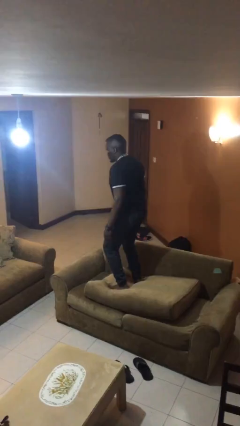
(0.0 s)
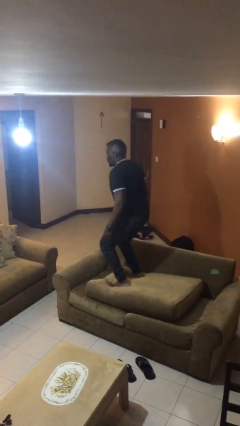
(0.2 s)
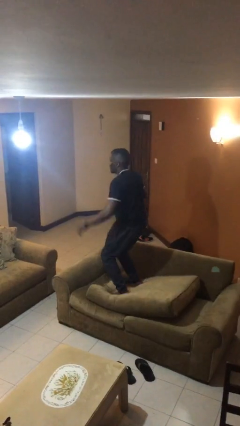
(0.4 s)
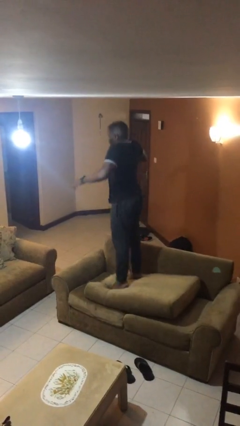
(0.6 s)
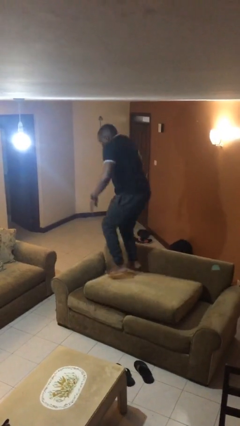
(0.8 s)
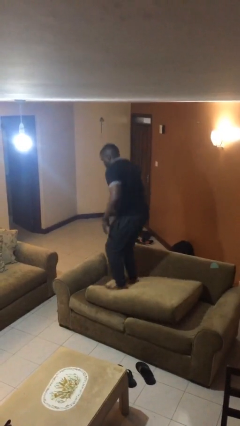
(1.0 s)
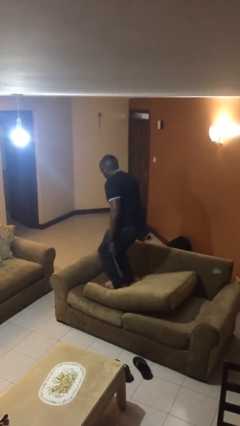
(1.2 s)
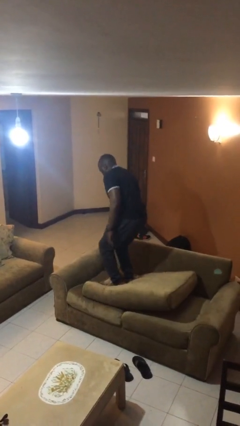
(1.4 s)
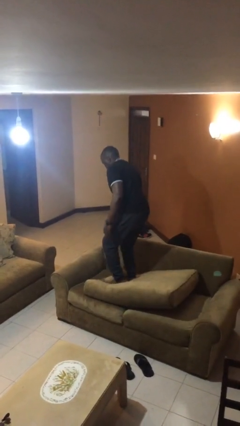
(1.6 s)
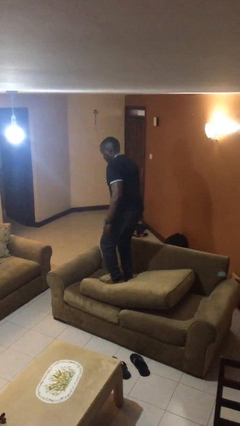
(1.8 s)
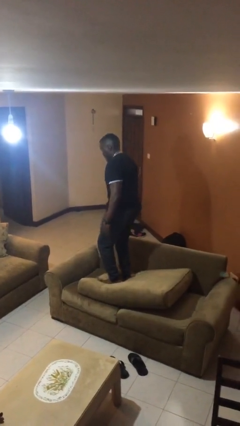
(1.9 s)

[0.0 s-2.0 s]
person jumps on couch

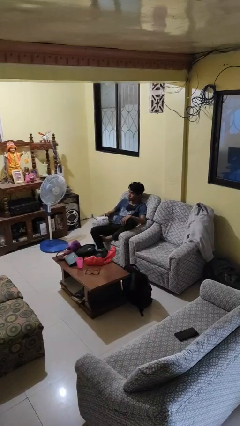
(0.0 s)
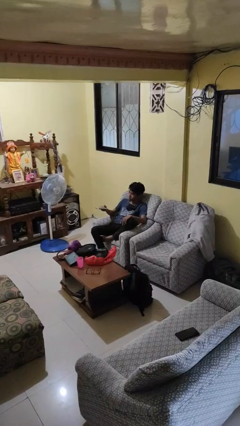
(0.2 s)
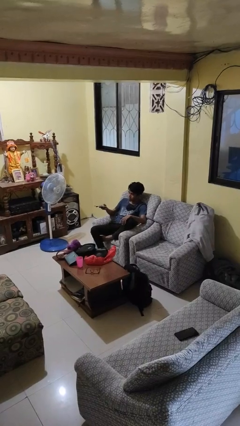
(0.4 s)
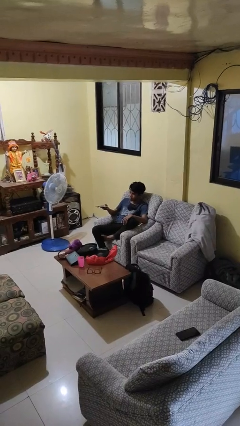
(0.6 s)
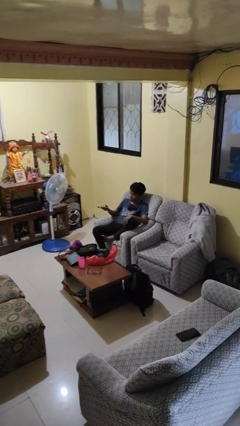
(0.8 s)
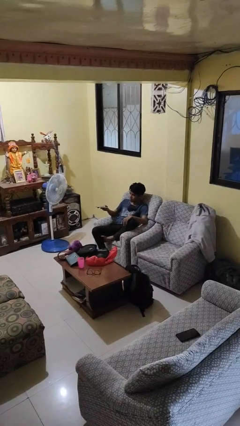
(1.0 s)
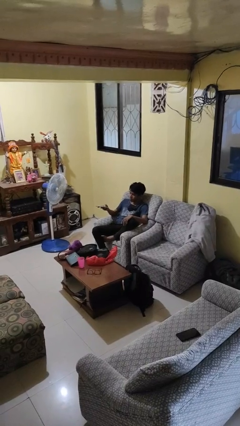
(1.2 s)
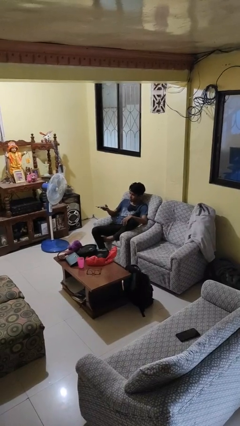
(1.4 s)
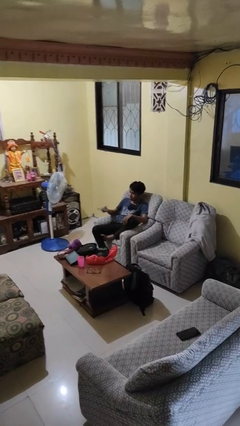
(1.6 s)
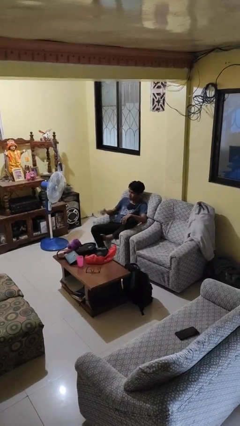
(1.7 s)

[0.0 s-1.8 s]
person uses television remote

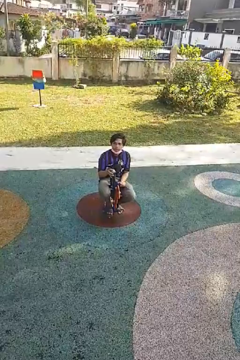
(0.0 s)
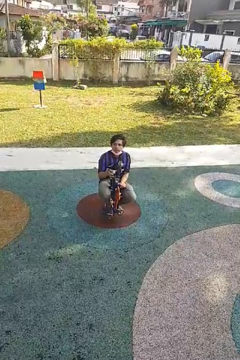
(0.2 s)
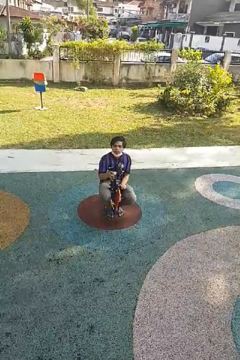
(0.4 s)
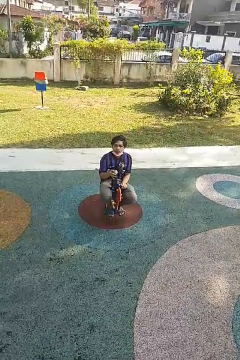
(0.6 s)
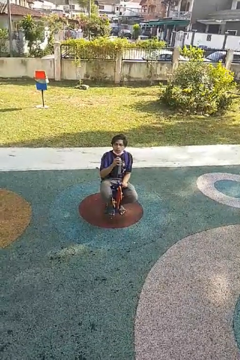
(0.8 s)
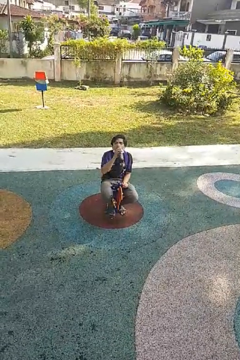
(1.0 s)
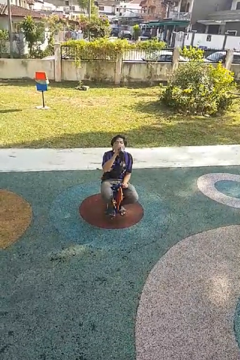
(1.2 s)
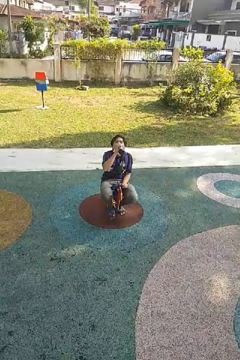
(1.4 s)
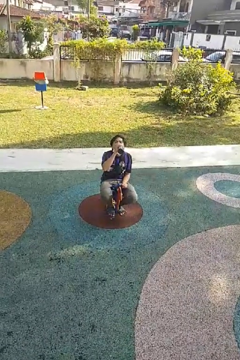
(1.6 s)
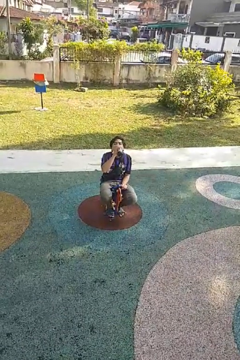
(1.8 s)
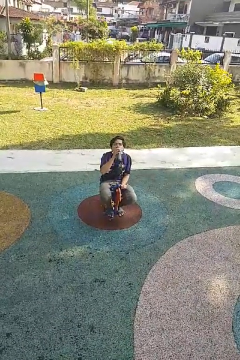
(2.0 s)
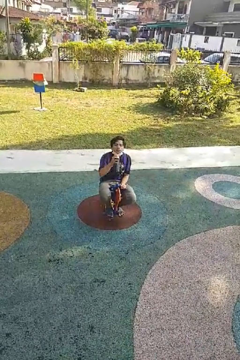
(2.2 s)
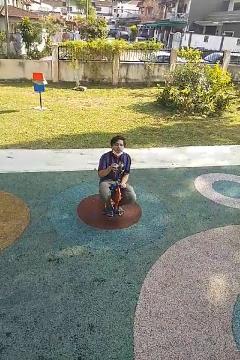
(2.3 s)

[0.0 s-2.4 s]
person drinks from bottle

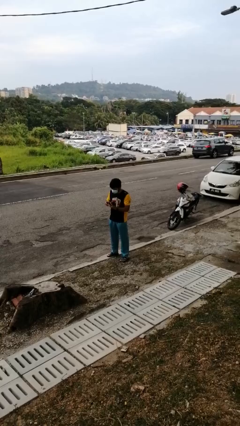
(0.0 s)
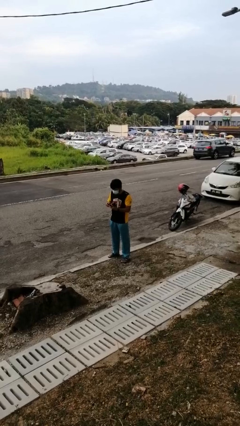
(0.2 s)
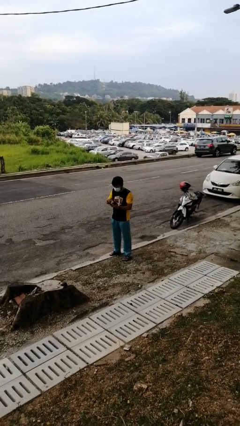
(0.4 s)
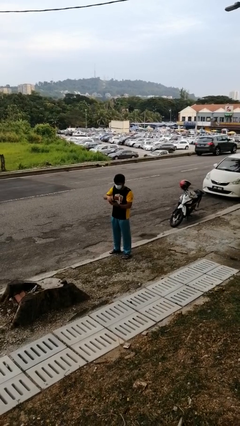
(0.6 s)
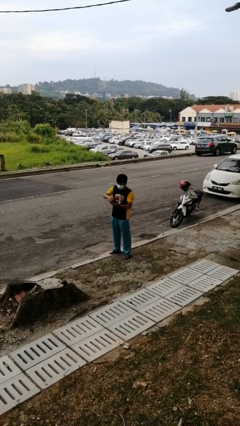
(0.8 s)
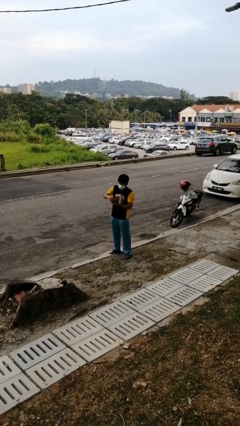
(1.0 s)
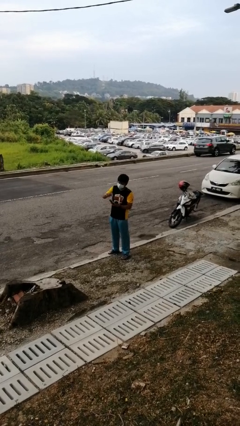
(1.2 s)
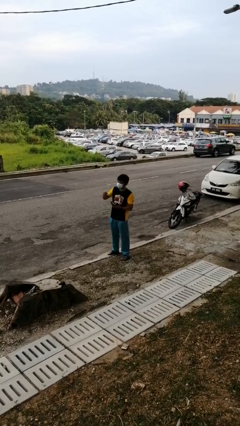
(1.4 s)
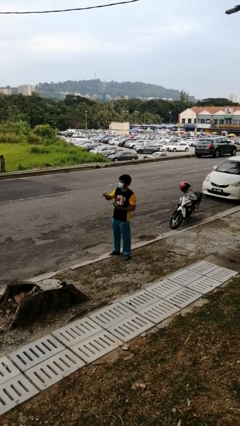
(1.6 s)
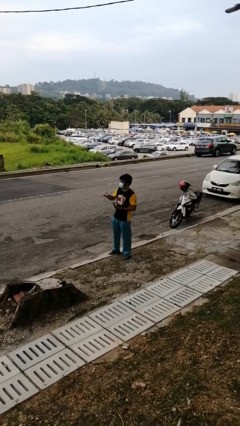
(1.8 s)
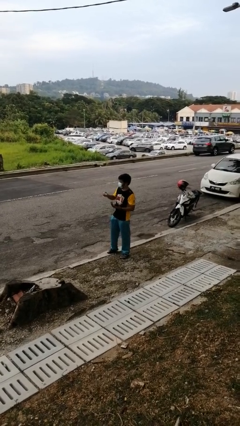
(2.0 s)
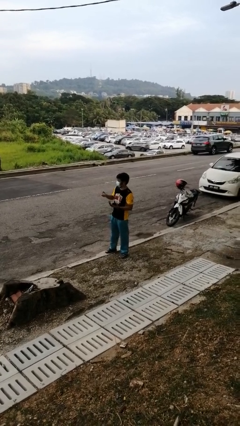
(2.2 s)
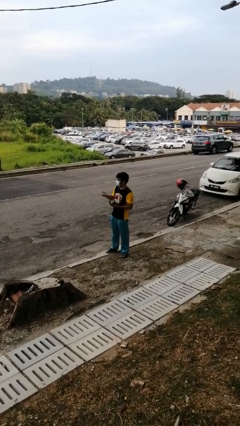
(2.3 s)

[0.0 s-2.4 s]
person takes object from purse

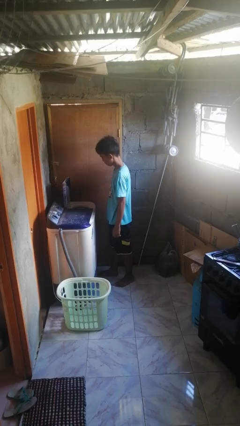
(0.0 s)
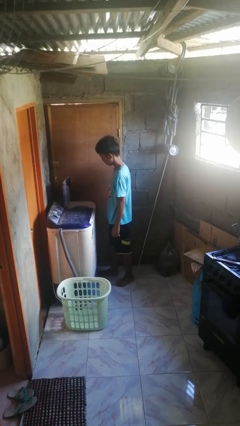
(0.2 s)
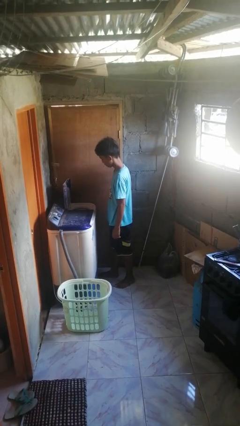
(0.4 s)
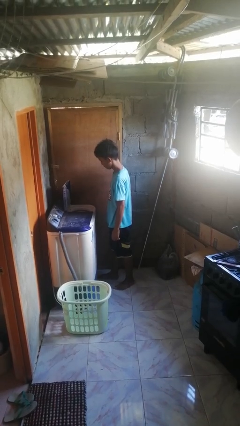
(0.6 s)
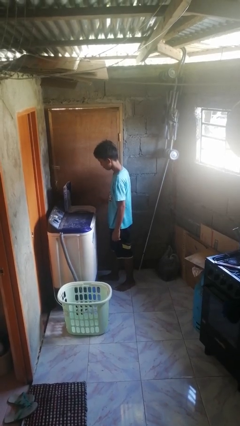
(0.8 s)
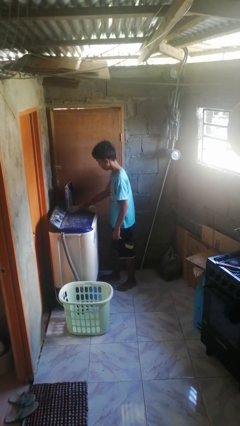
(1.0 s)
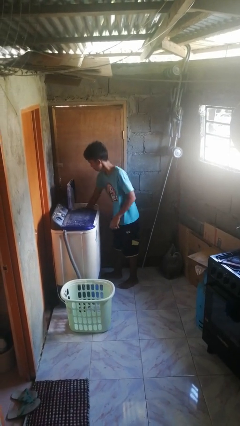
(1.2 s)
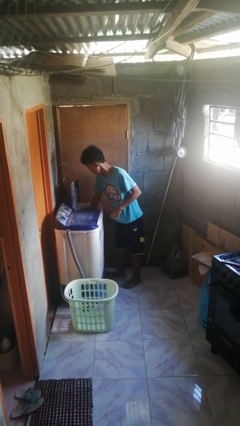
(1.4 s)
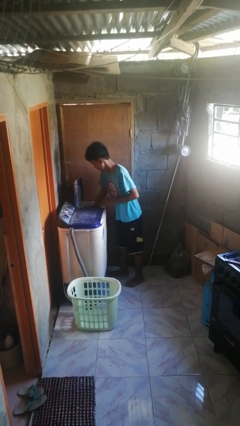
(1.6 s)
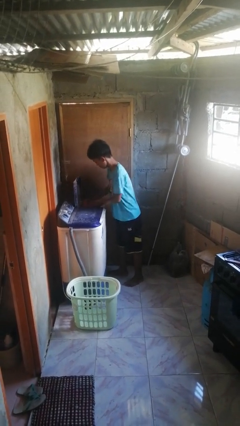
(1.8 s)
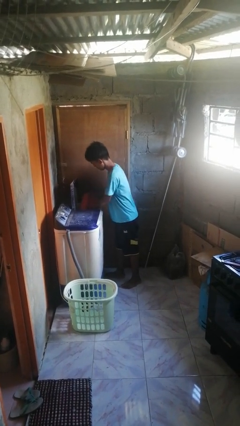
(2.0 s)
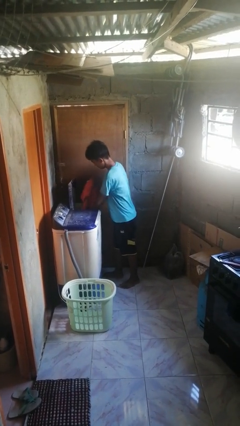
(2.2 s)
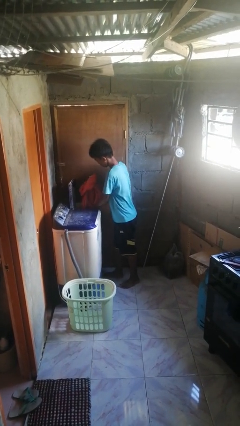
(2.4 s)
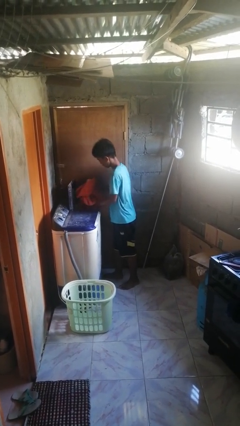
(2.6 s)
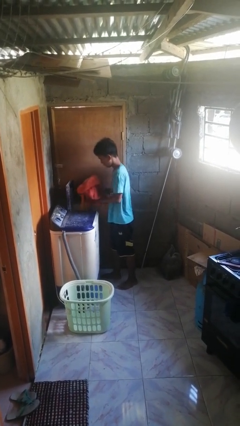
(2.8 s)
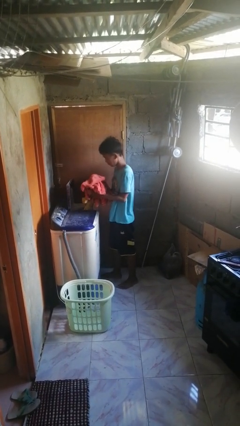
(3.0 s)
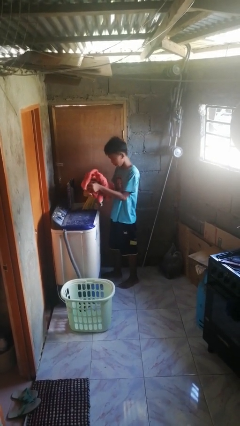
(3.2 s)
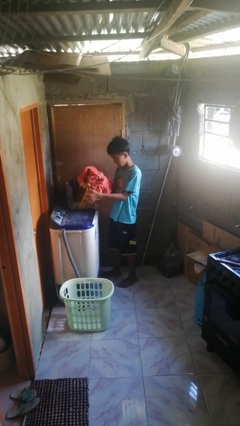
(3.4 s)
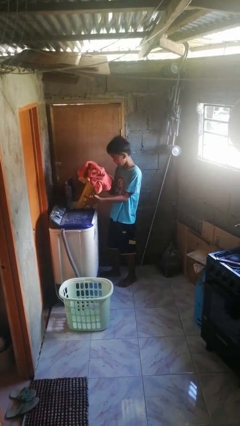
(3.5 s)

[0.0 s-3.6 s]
person unloads dryer

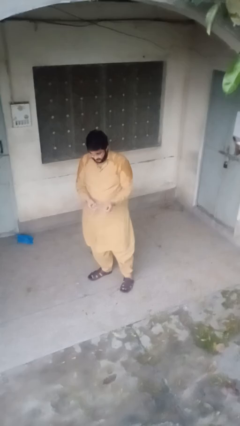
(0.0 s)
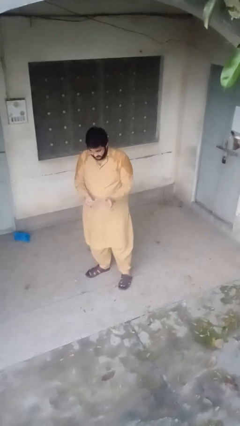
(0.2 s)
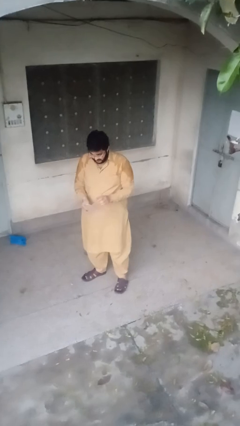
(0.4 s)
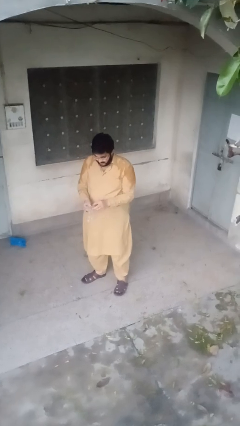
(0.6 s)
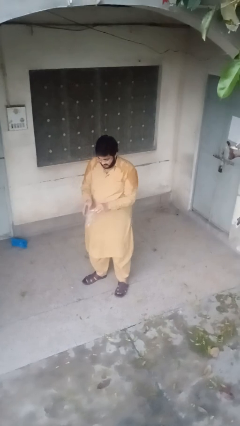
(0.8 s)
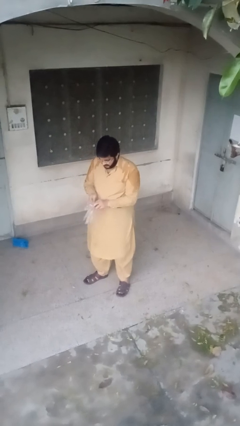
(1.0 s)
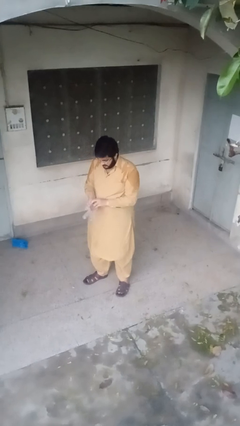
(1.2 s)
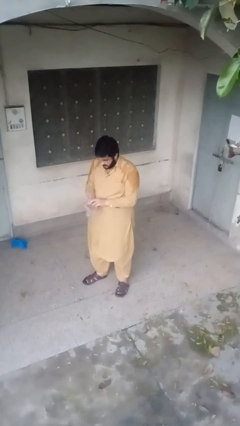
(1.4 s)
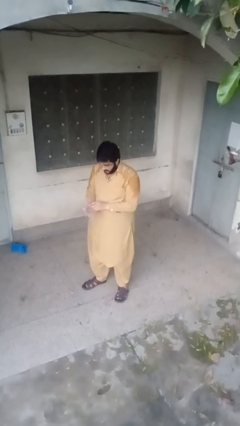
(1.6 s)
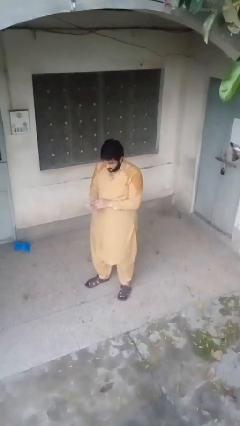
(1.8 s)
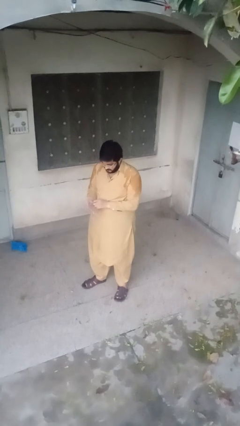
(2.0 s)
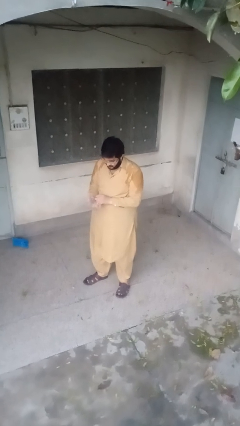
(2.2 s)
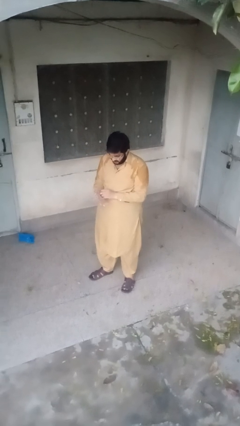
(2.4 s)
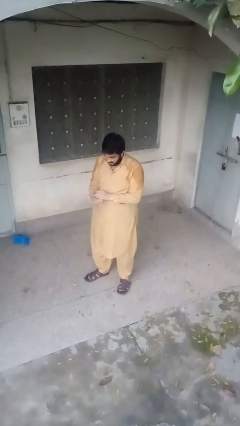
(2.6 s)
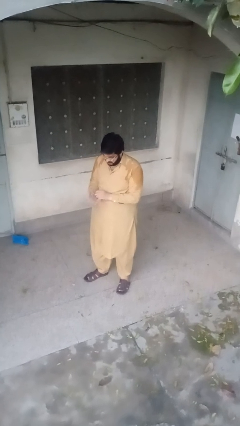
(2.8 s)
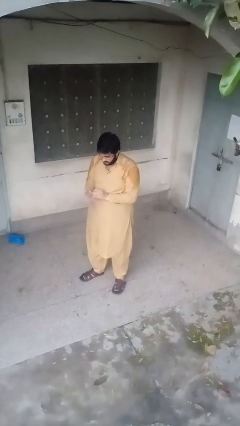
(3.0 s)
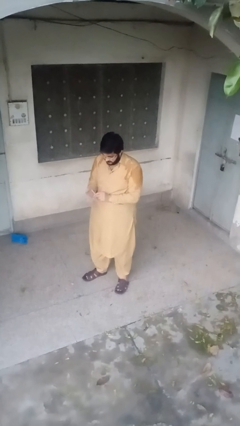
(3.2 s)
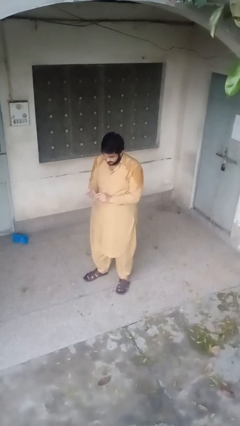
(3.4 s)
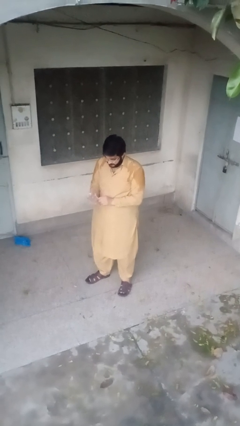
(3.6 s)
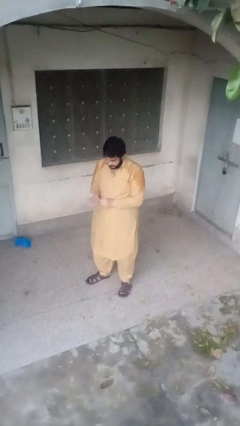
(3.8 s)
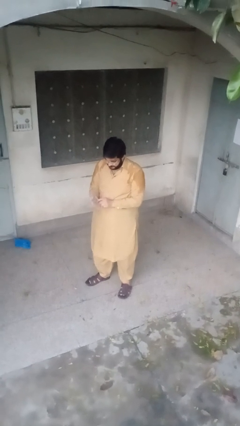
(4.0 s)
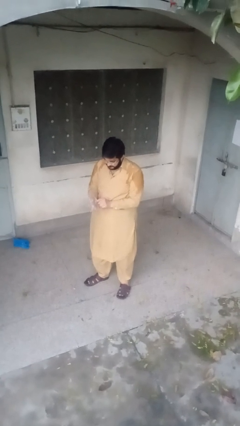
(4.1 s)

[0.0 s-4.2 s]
person puts on gloves

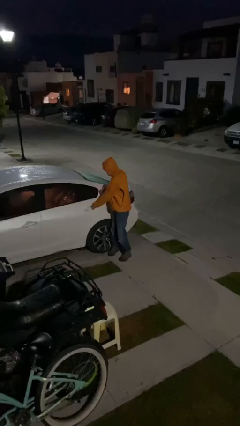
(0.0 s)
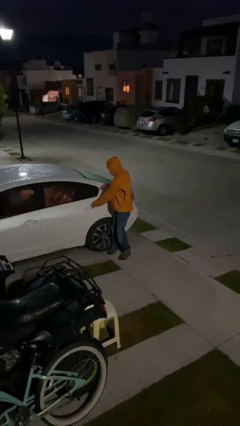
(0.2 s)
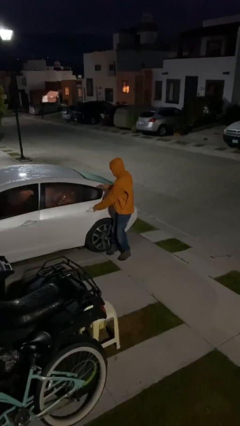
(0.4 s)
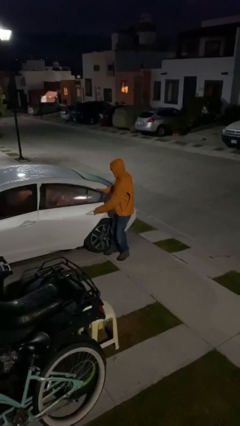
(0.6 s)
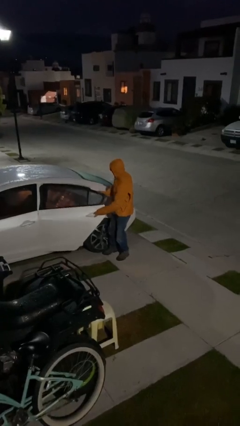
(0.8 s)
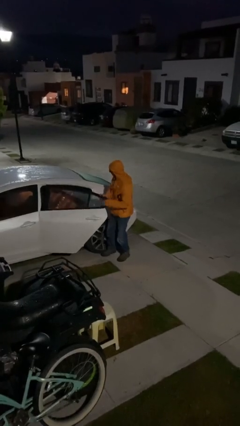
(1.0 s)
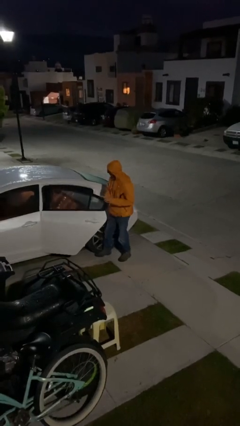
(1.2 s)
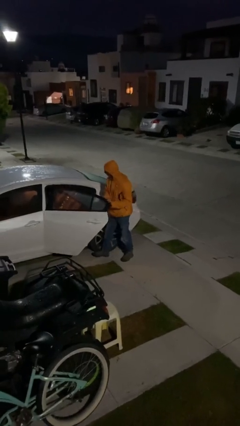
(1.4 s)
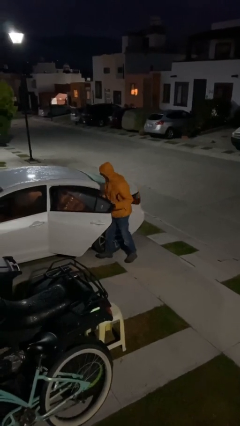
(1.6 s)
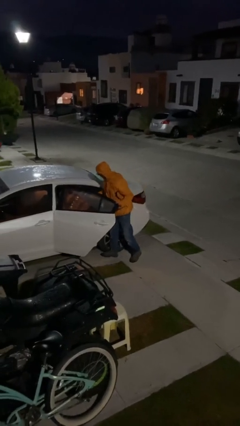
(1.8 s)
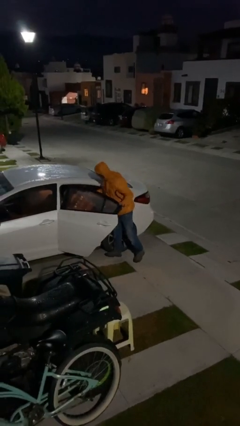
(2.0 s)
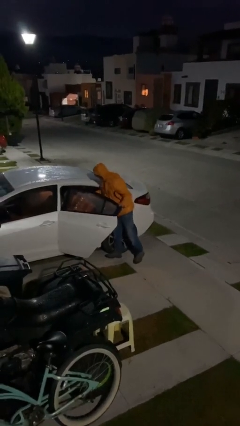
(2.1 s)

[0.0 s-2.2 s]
person opens car door
